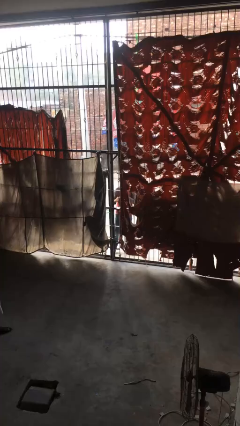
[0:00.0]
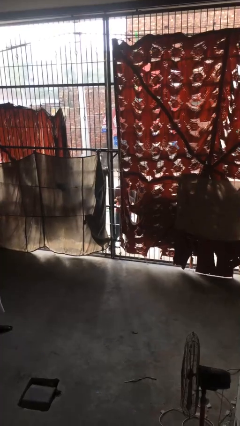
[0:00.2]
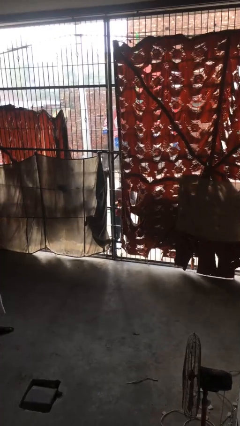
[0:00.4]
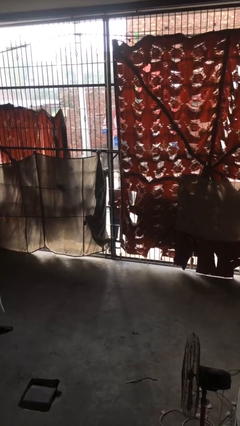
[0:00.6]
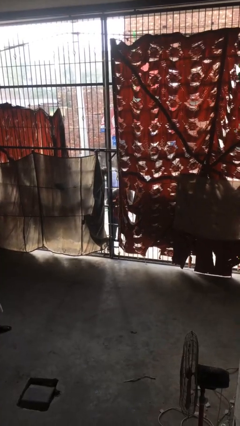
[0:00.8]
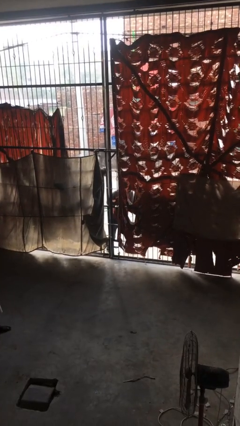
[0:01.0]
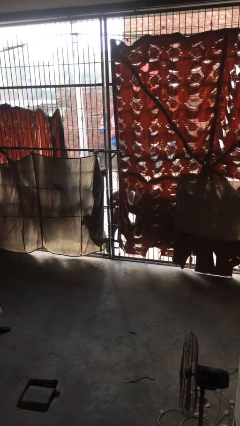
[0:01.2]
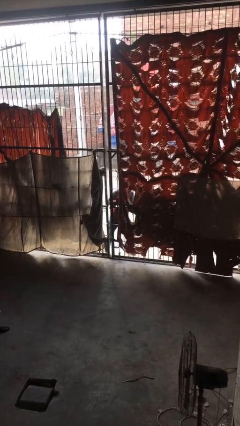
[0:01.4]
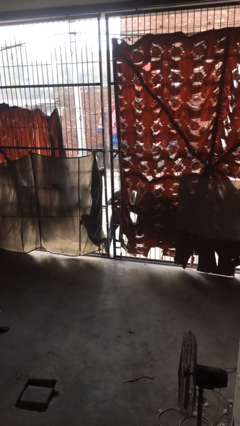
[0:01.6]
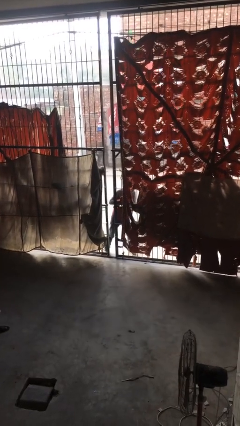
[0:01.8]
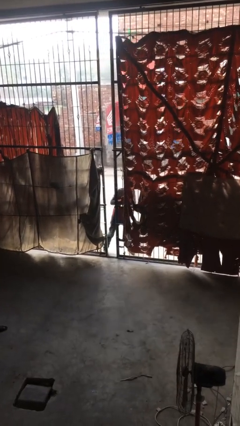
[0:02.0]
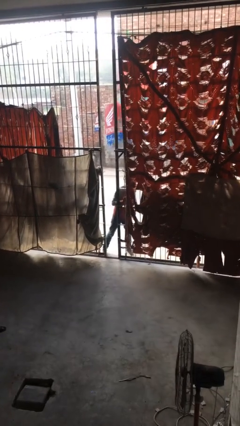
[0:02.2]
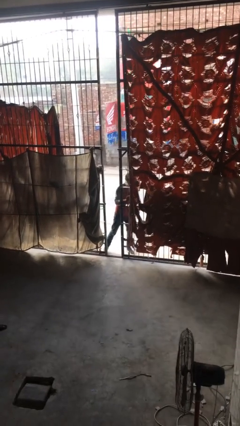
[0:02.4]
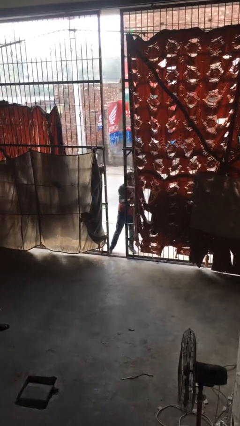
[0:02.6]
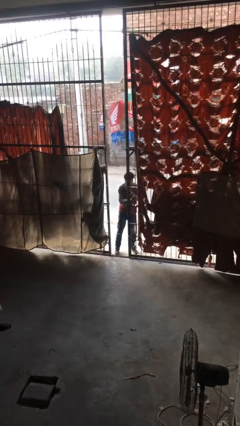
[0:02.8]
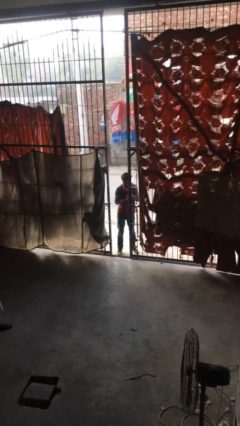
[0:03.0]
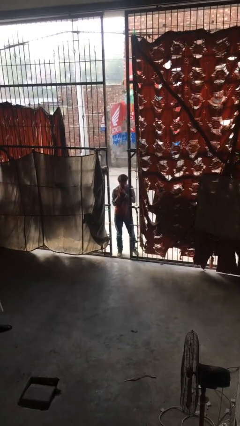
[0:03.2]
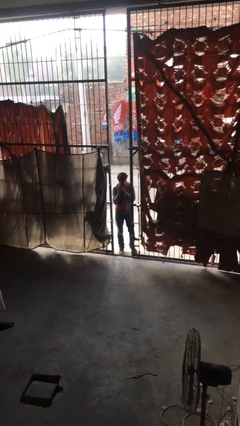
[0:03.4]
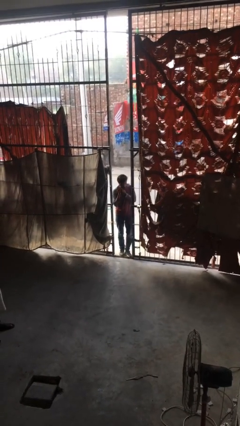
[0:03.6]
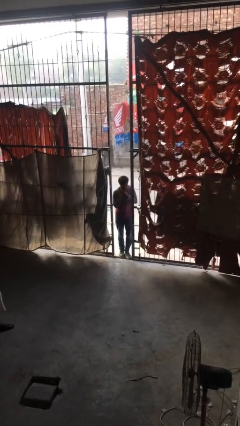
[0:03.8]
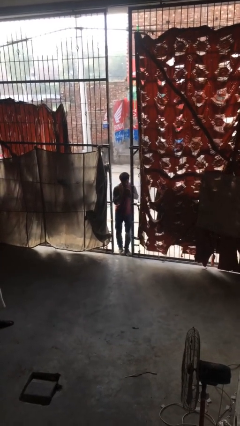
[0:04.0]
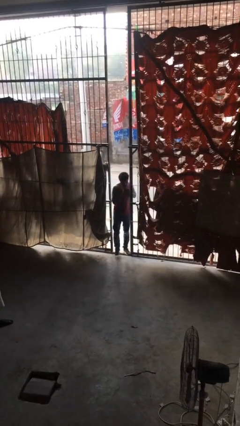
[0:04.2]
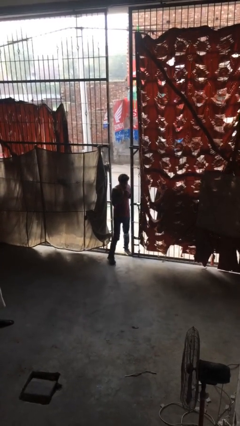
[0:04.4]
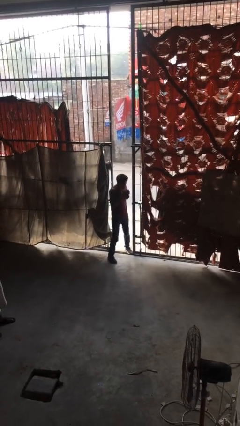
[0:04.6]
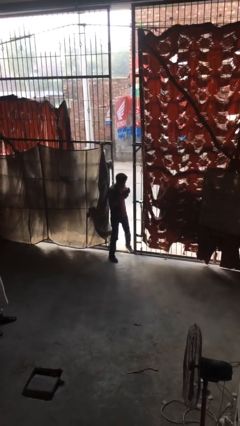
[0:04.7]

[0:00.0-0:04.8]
person opens facility door

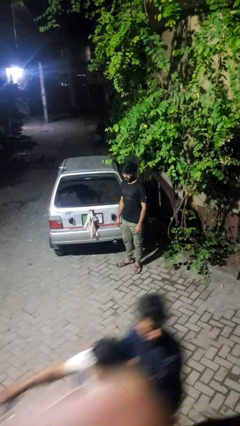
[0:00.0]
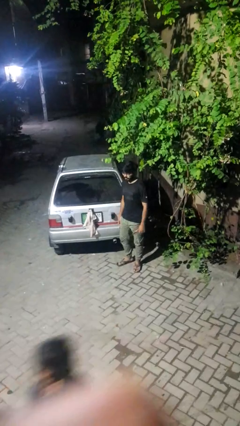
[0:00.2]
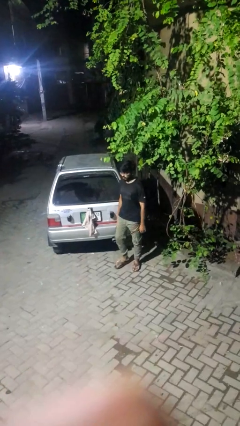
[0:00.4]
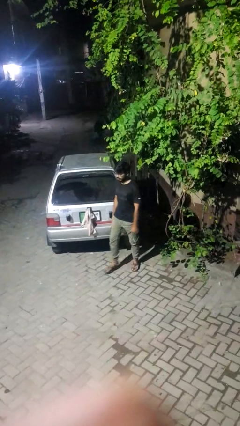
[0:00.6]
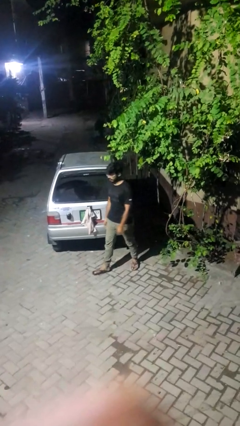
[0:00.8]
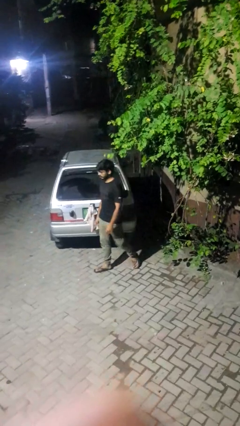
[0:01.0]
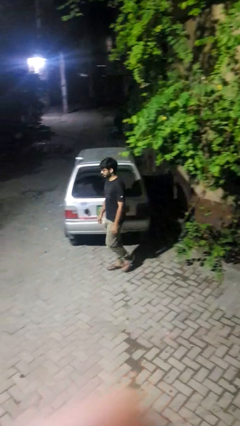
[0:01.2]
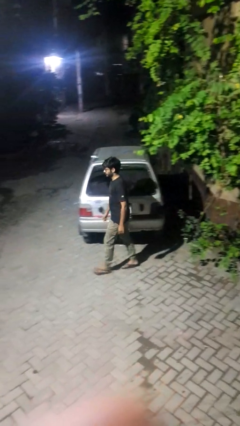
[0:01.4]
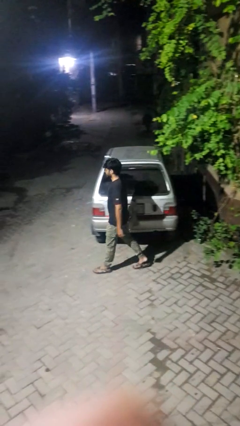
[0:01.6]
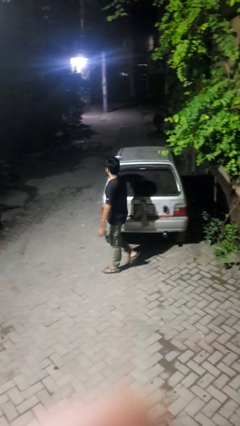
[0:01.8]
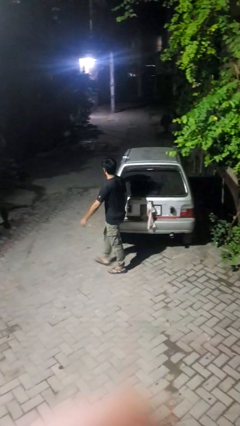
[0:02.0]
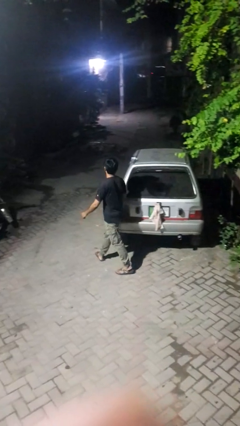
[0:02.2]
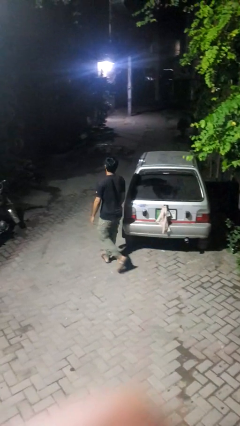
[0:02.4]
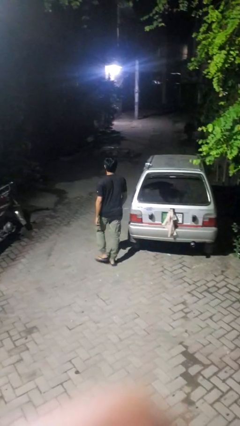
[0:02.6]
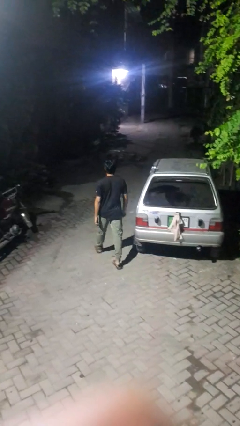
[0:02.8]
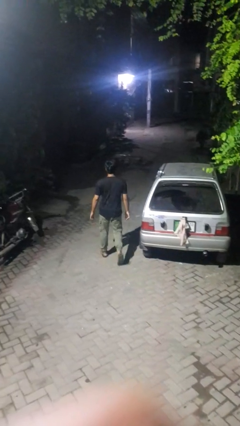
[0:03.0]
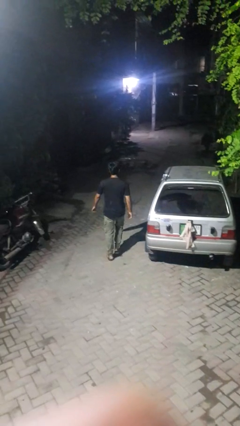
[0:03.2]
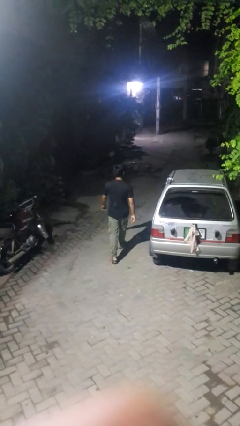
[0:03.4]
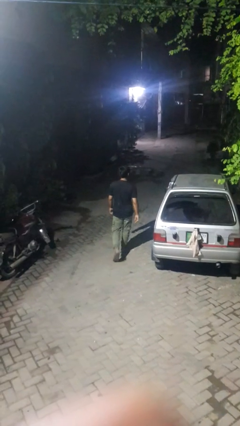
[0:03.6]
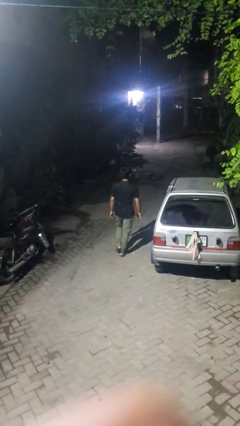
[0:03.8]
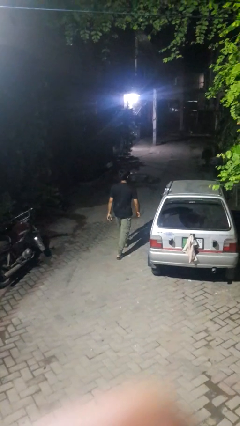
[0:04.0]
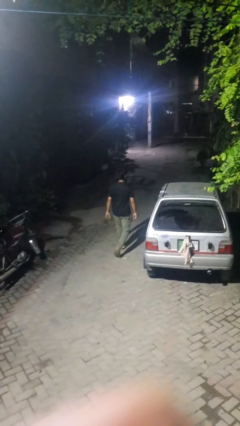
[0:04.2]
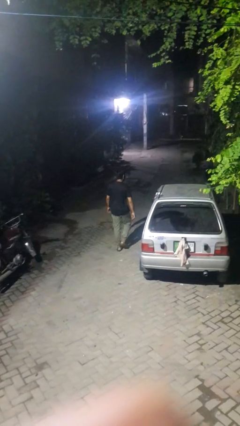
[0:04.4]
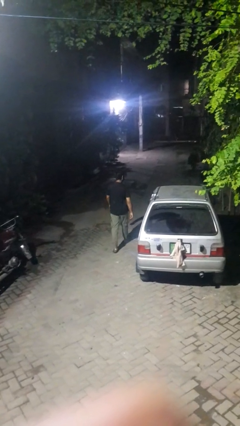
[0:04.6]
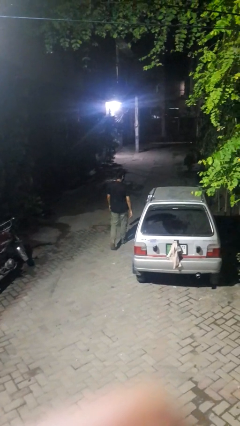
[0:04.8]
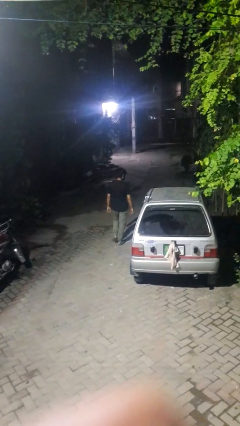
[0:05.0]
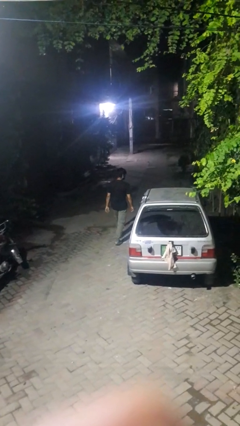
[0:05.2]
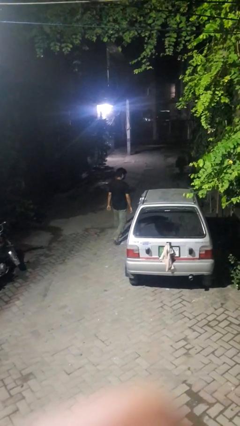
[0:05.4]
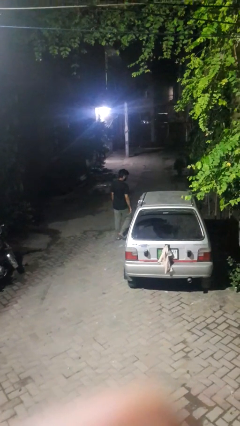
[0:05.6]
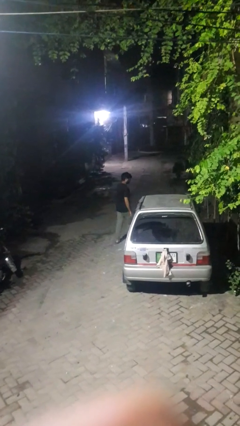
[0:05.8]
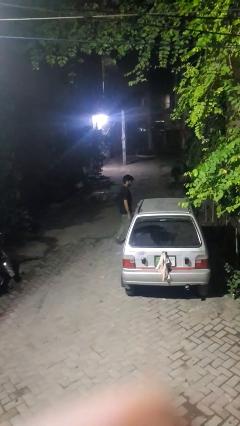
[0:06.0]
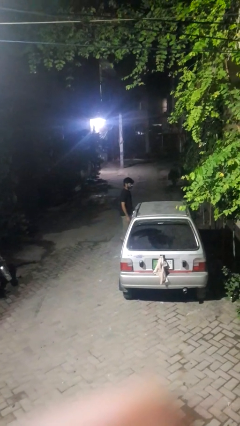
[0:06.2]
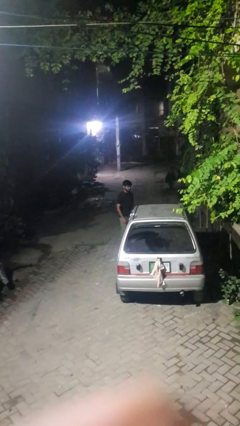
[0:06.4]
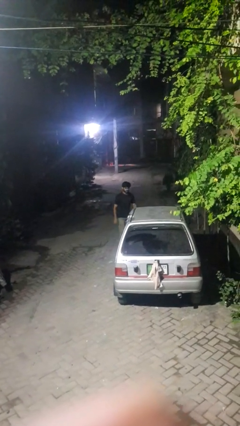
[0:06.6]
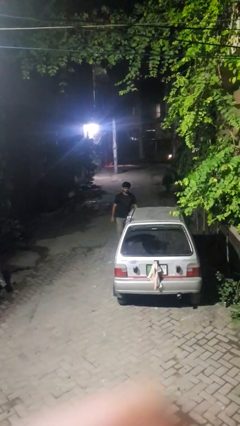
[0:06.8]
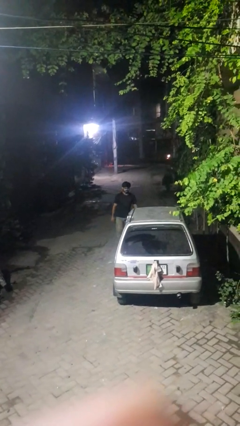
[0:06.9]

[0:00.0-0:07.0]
person walks around car

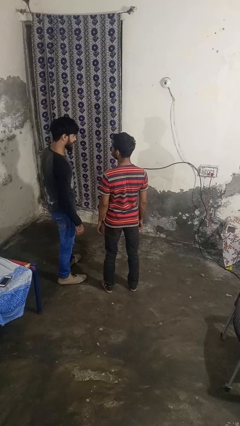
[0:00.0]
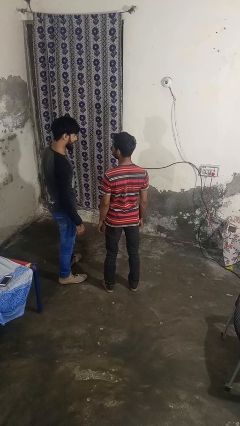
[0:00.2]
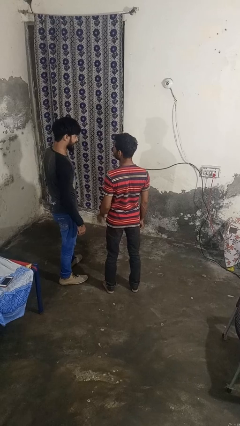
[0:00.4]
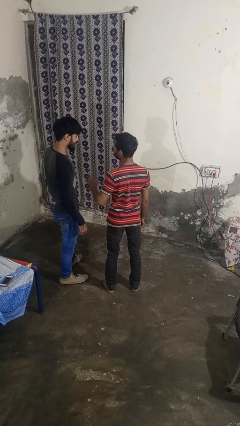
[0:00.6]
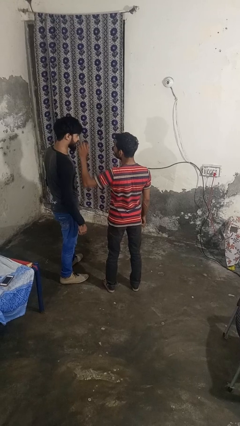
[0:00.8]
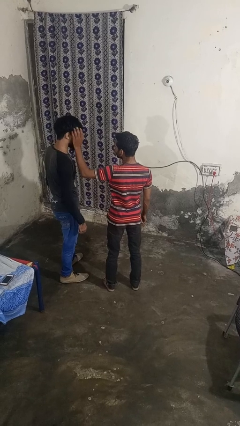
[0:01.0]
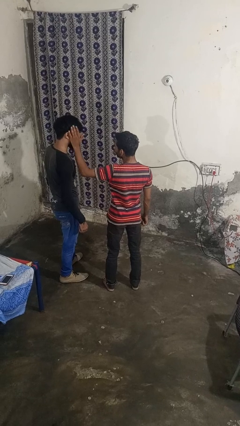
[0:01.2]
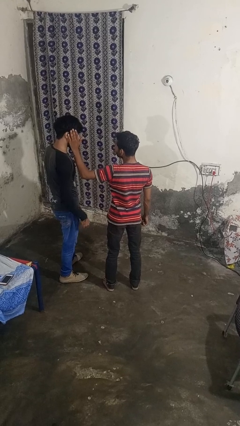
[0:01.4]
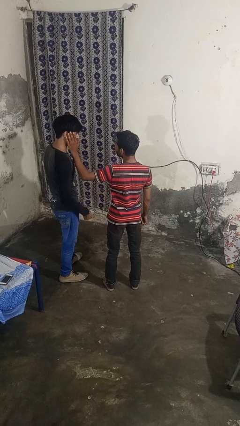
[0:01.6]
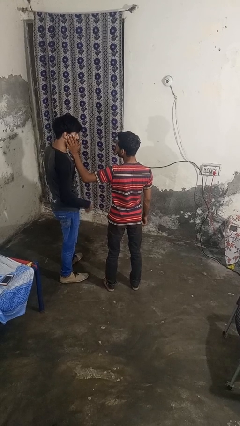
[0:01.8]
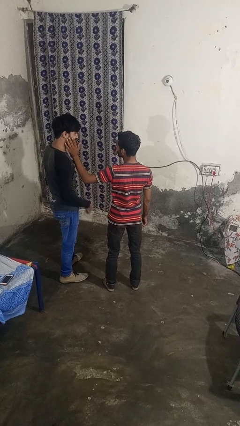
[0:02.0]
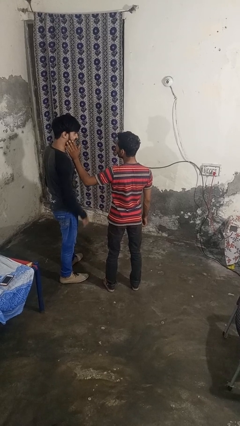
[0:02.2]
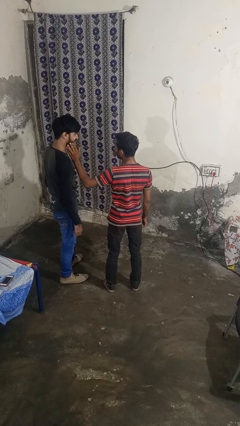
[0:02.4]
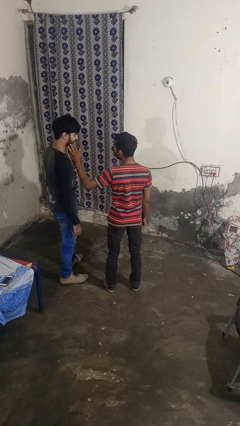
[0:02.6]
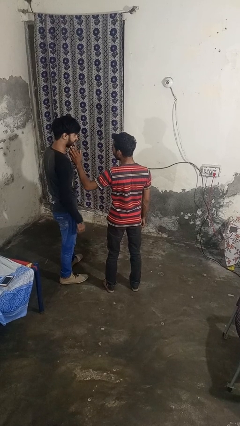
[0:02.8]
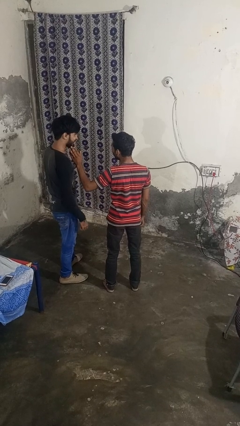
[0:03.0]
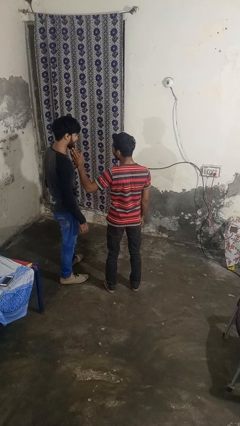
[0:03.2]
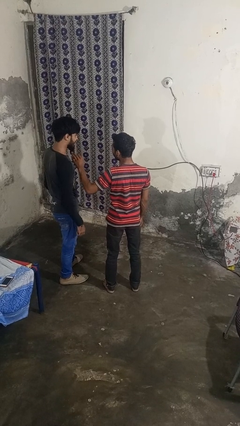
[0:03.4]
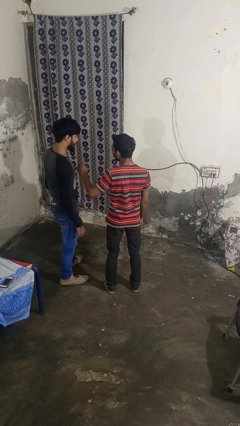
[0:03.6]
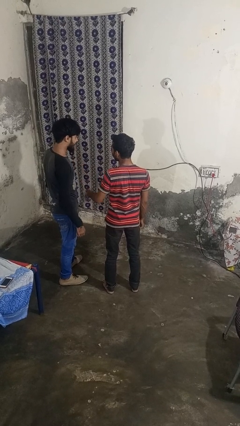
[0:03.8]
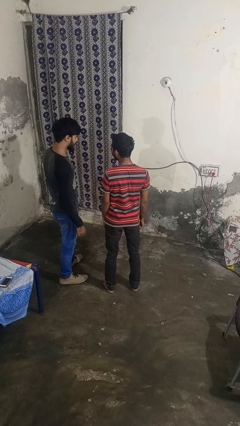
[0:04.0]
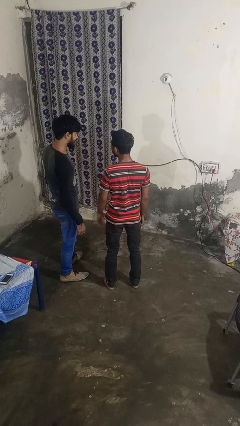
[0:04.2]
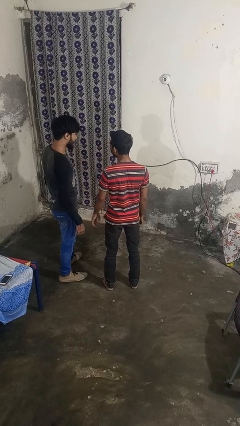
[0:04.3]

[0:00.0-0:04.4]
person touches face of person

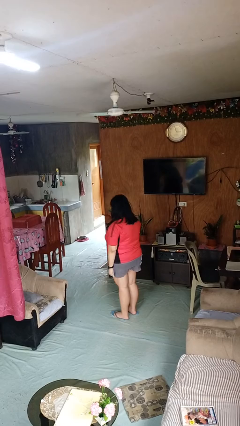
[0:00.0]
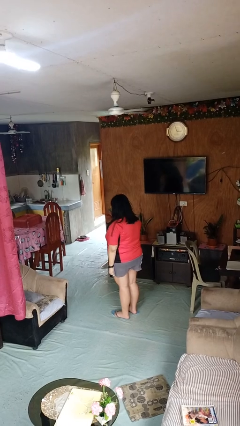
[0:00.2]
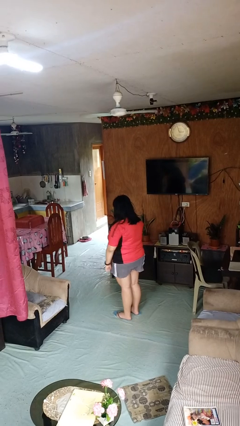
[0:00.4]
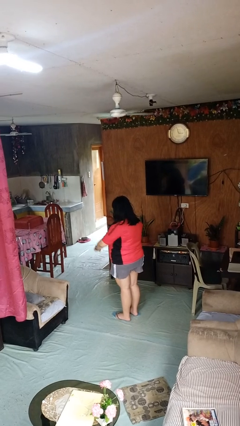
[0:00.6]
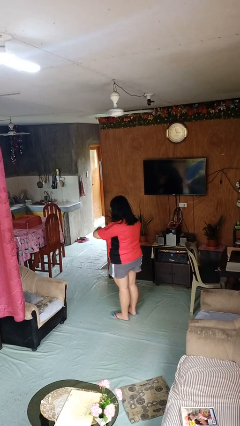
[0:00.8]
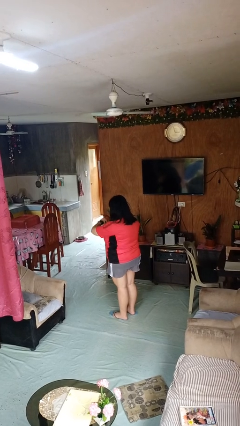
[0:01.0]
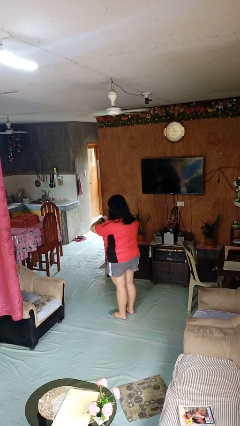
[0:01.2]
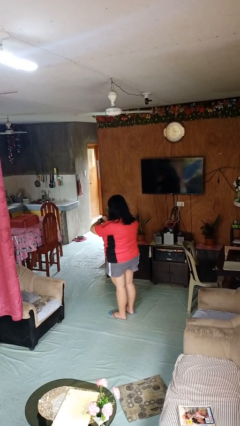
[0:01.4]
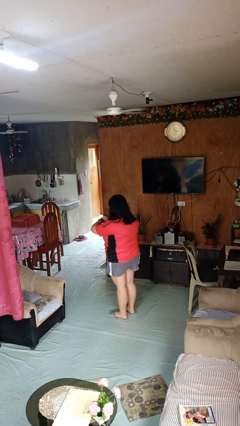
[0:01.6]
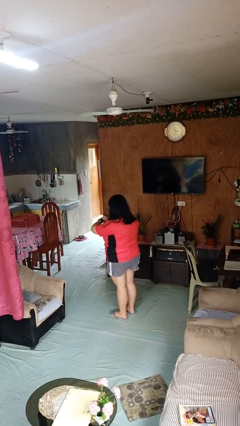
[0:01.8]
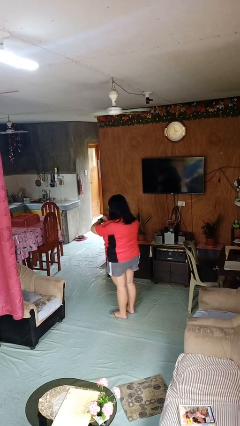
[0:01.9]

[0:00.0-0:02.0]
person looks at wristwatch
